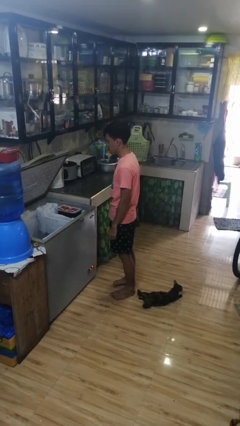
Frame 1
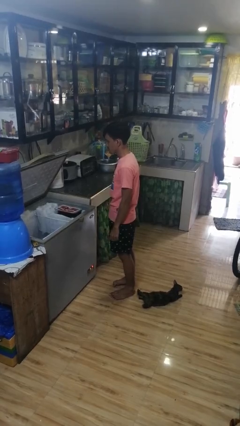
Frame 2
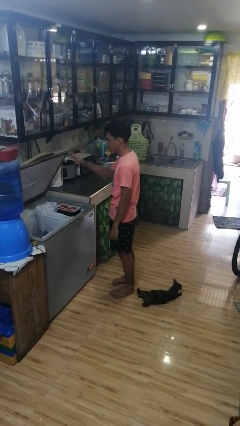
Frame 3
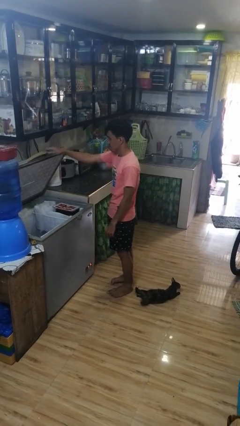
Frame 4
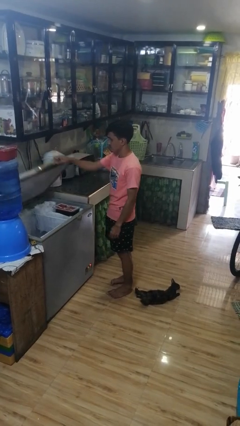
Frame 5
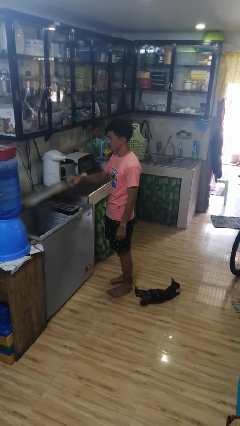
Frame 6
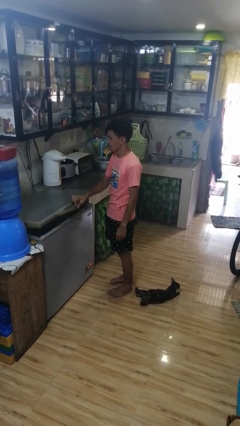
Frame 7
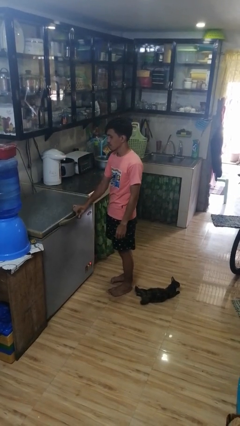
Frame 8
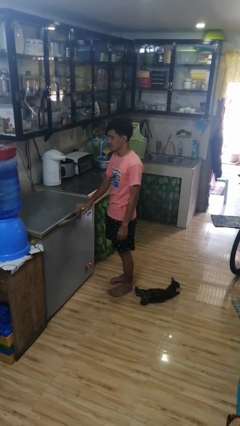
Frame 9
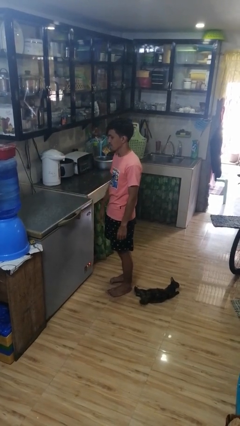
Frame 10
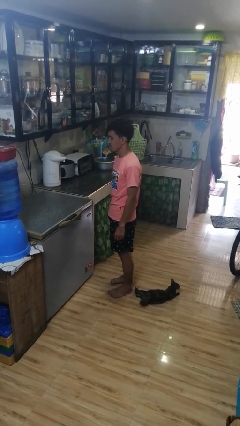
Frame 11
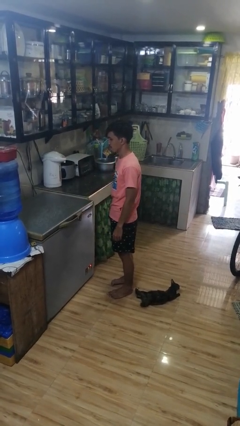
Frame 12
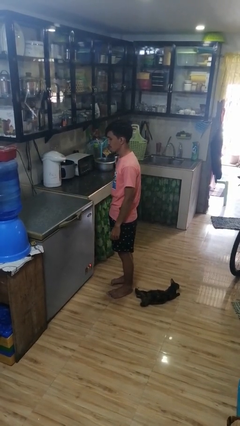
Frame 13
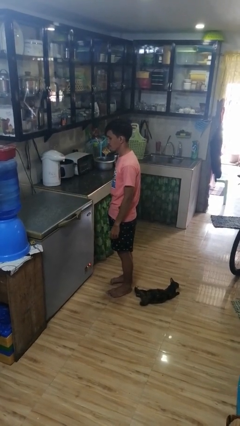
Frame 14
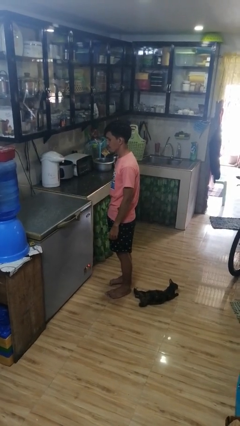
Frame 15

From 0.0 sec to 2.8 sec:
person closes refrigerator

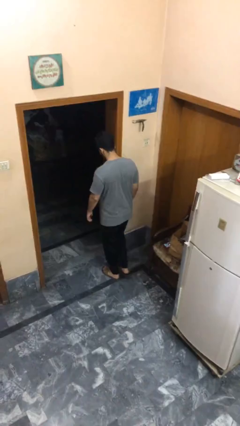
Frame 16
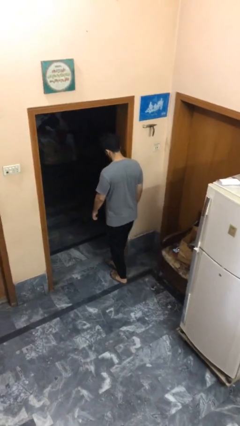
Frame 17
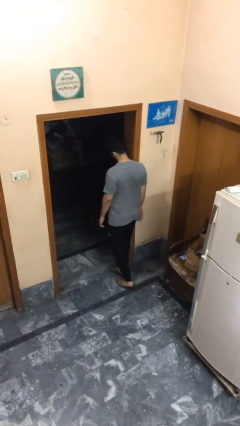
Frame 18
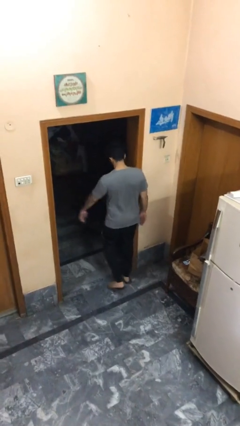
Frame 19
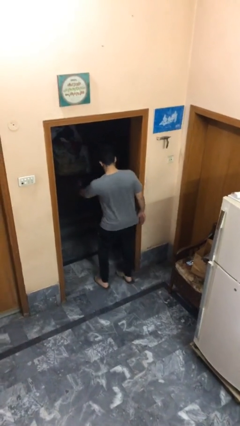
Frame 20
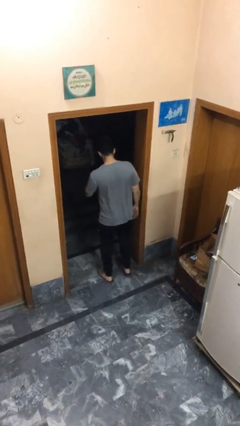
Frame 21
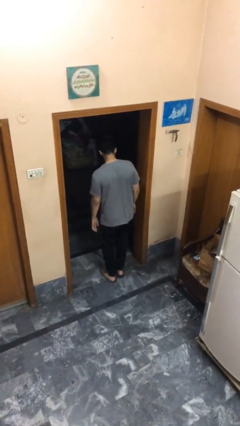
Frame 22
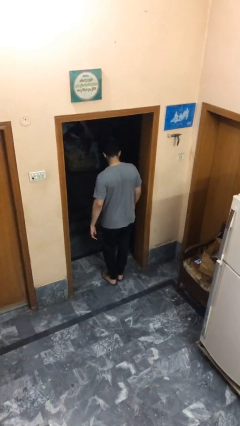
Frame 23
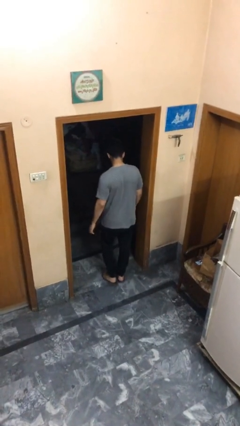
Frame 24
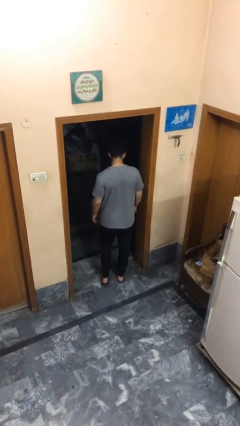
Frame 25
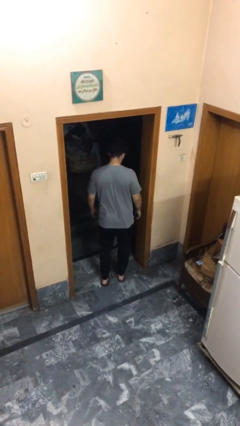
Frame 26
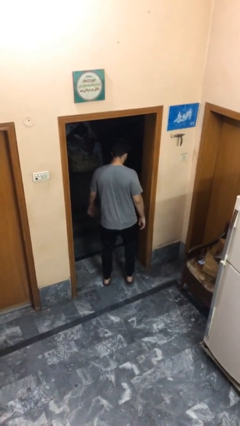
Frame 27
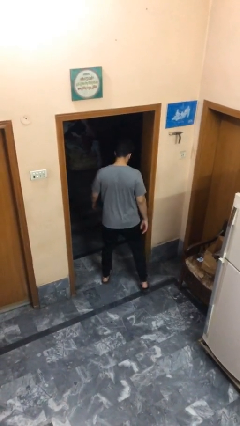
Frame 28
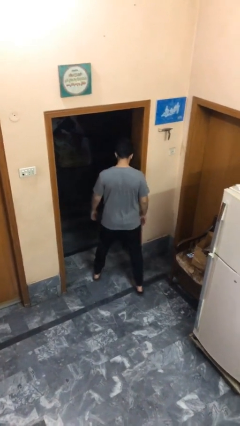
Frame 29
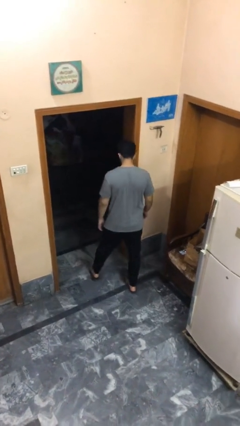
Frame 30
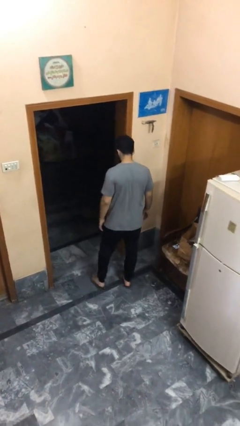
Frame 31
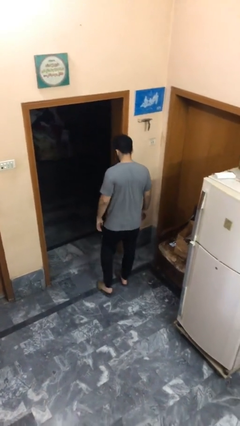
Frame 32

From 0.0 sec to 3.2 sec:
person bumps into wall

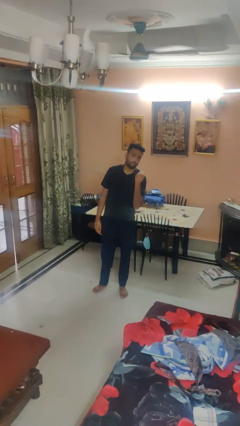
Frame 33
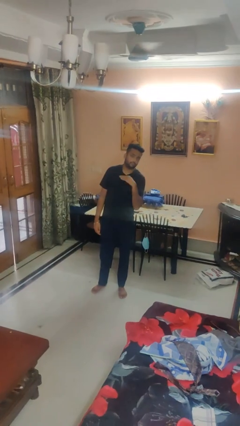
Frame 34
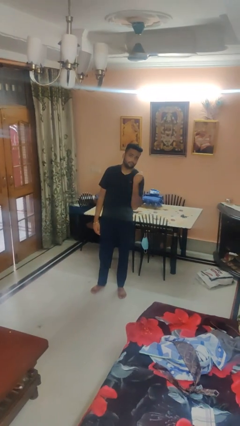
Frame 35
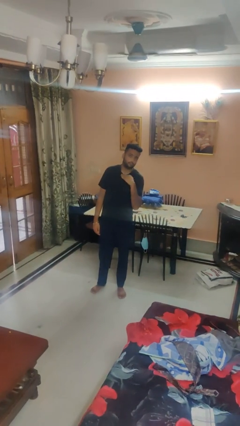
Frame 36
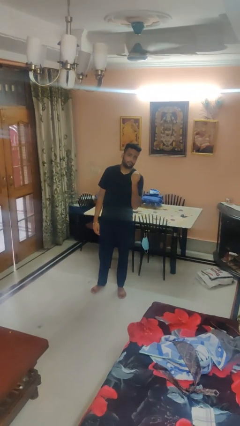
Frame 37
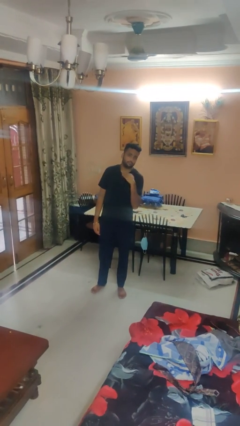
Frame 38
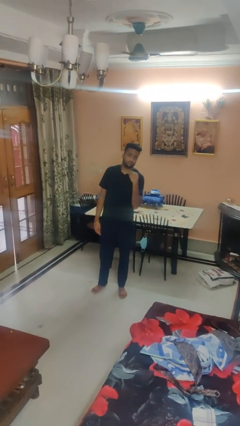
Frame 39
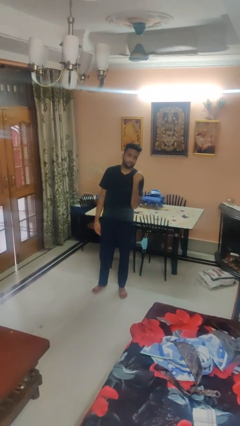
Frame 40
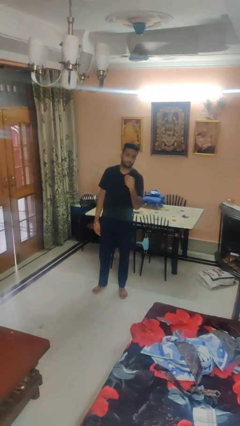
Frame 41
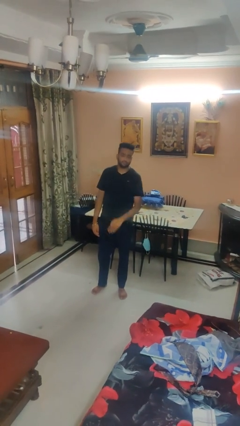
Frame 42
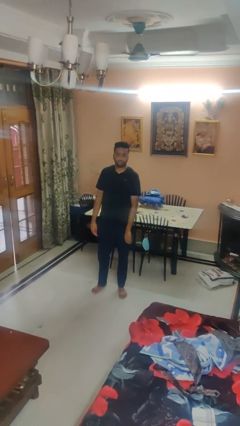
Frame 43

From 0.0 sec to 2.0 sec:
person gestures cut

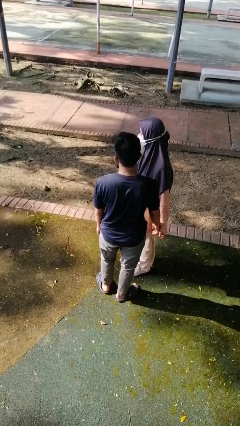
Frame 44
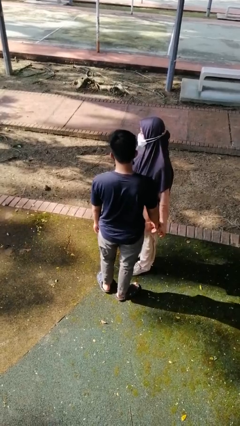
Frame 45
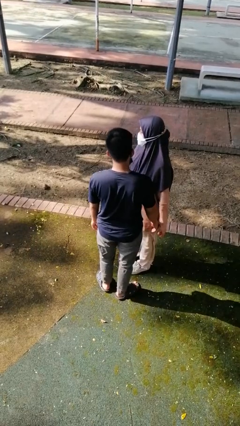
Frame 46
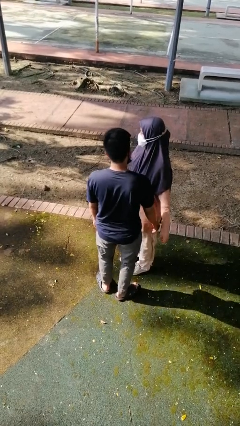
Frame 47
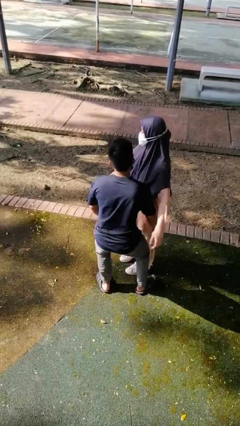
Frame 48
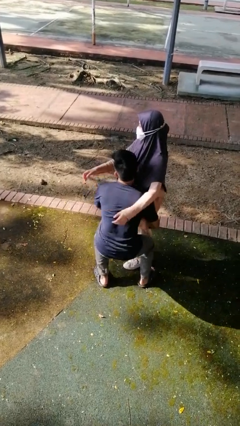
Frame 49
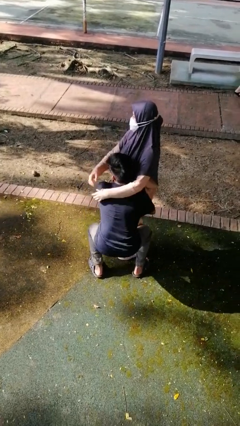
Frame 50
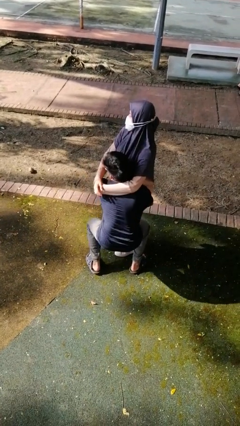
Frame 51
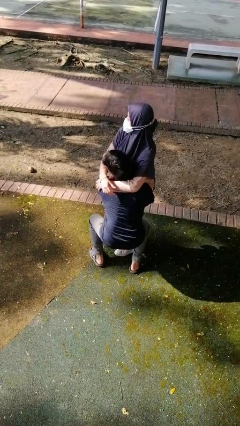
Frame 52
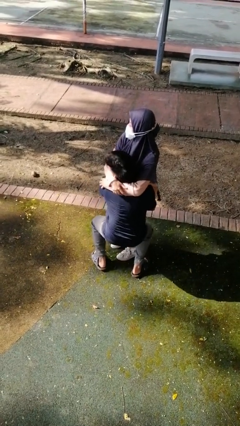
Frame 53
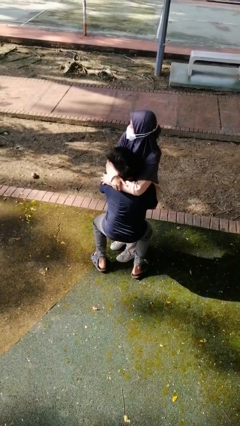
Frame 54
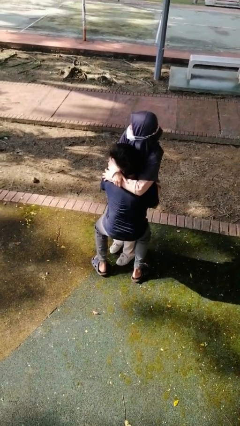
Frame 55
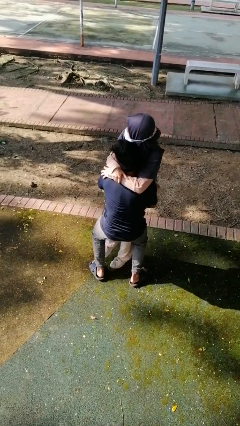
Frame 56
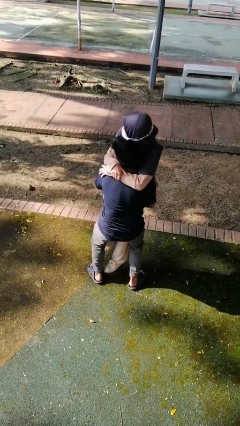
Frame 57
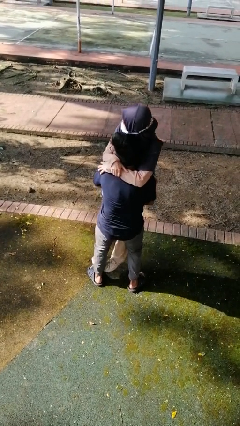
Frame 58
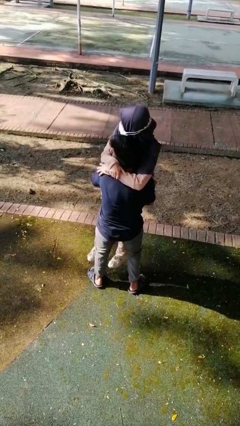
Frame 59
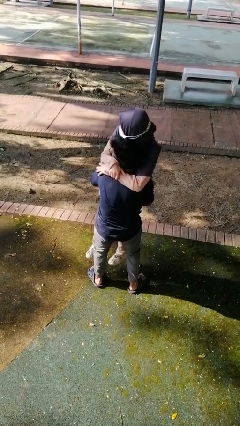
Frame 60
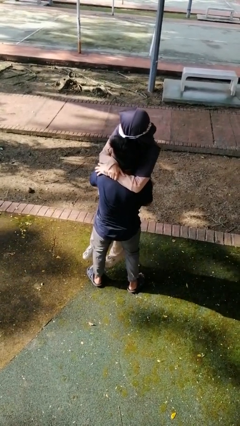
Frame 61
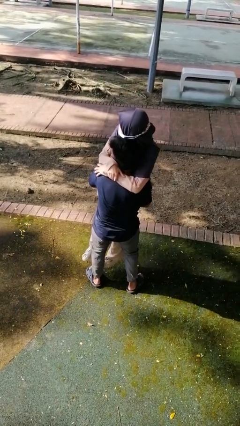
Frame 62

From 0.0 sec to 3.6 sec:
person picks up person

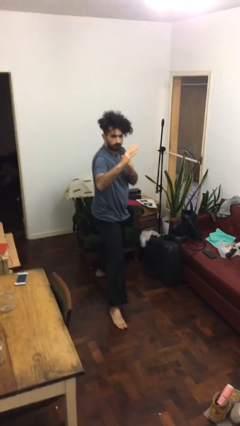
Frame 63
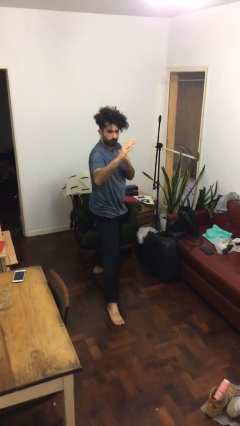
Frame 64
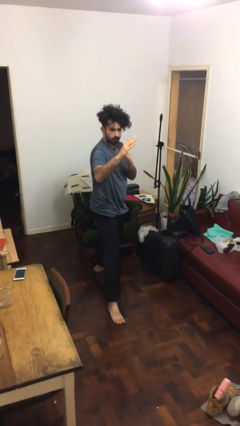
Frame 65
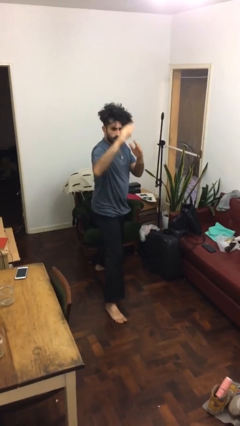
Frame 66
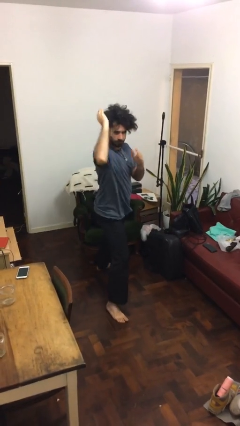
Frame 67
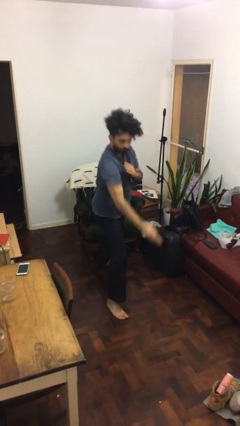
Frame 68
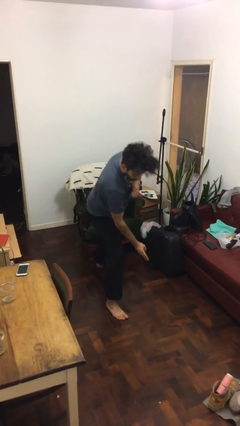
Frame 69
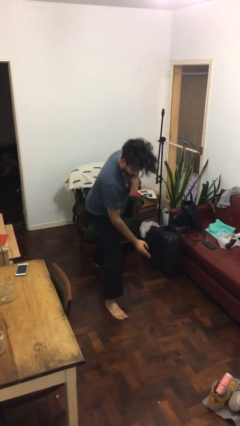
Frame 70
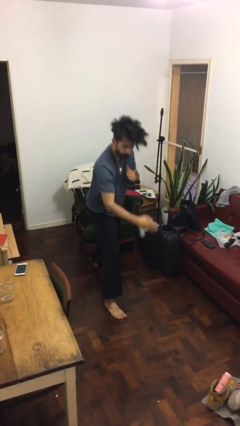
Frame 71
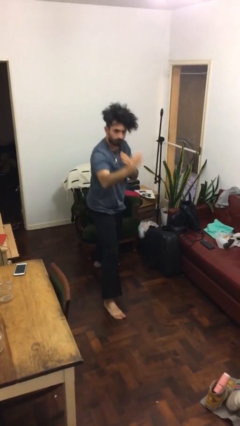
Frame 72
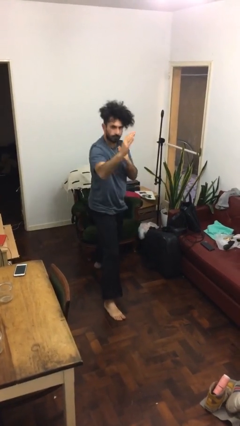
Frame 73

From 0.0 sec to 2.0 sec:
person karate chop

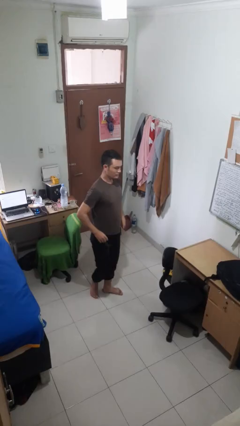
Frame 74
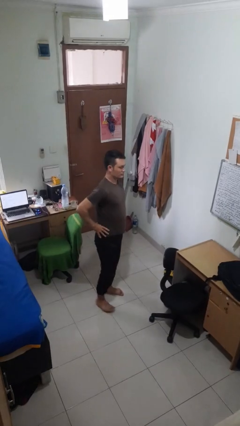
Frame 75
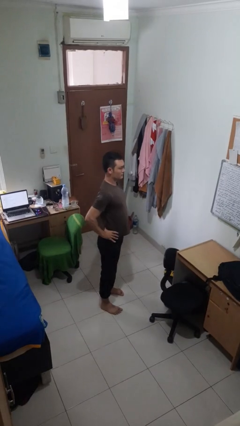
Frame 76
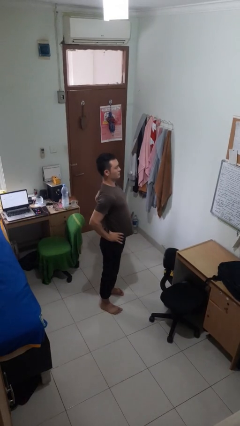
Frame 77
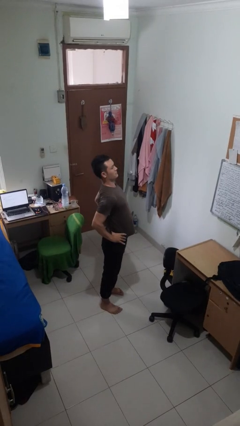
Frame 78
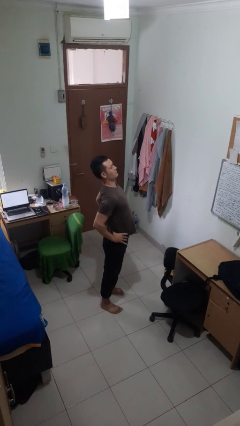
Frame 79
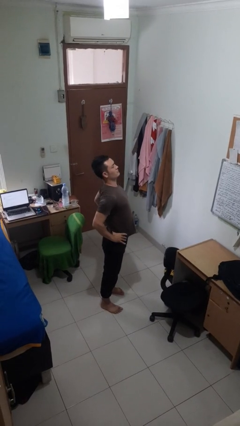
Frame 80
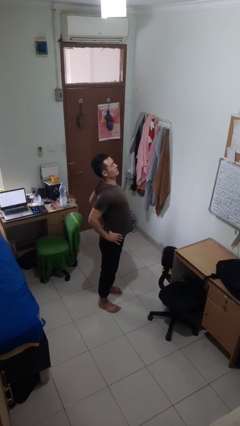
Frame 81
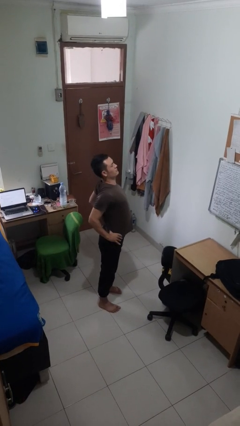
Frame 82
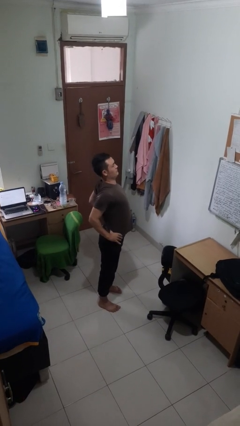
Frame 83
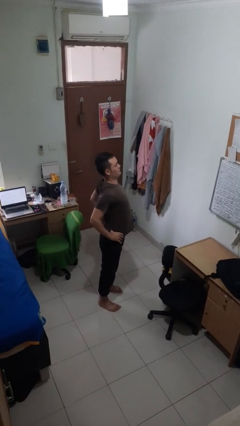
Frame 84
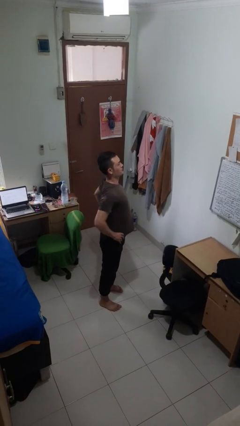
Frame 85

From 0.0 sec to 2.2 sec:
person stretches back

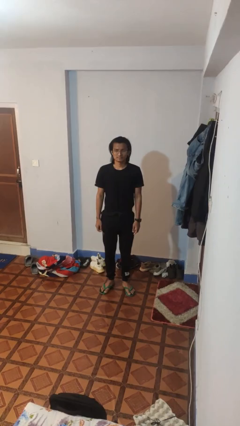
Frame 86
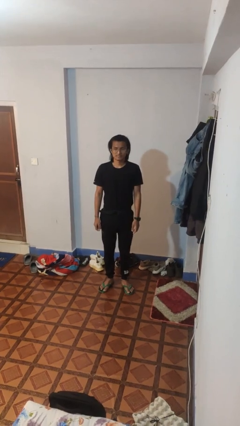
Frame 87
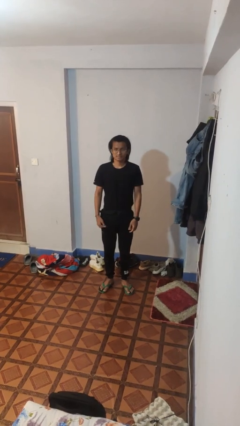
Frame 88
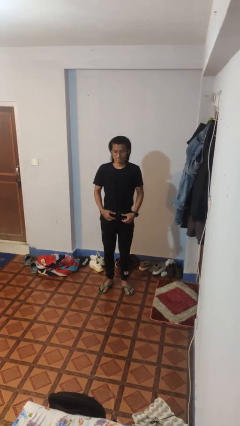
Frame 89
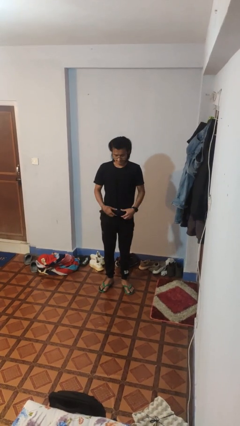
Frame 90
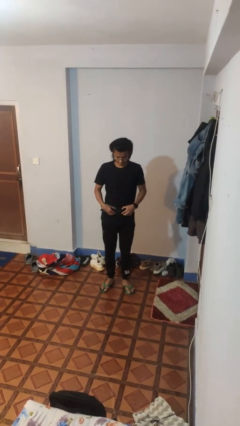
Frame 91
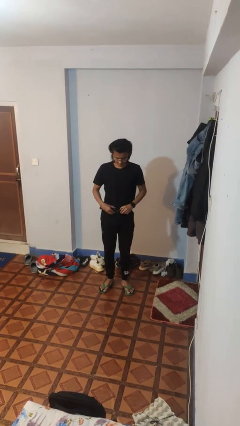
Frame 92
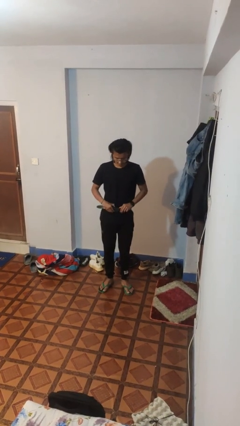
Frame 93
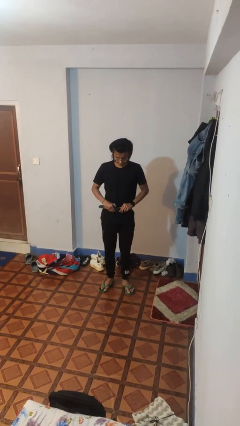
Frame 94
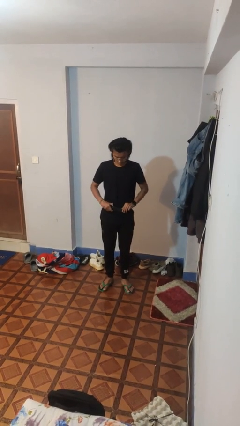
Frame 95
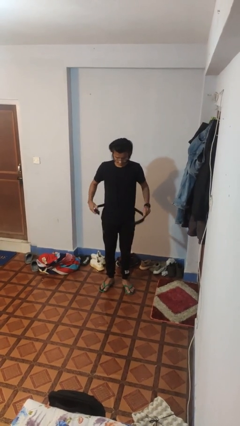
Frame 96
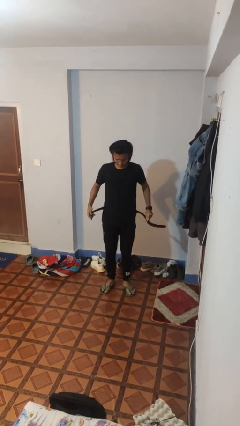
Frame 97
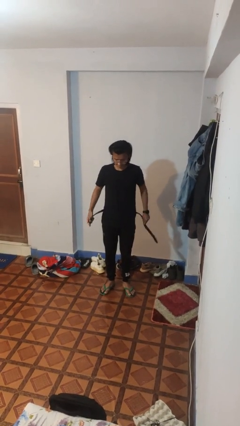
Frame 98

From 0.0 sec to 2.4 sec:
person takes off belt
